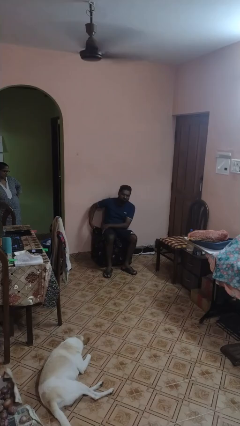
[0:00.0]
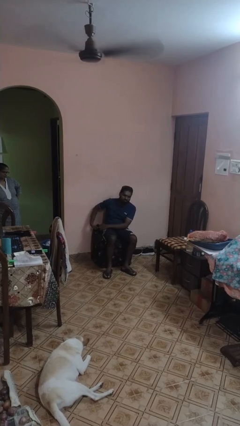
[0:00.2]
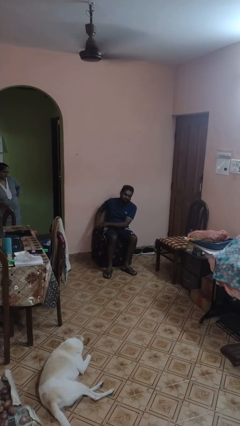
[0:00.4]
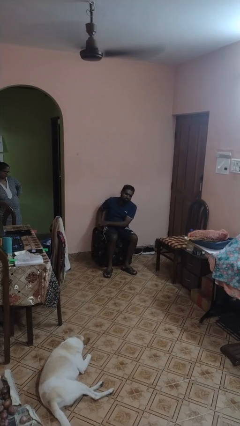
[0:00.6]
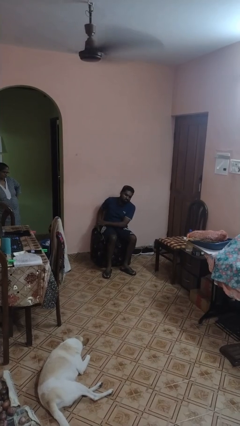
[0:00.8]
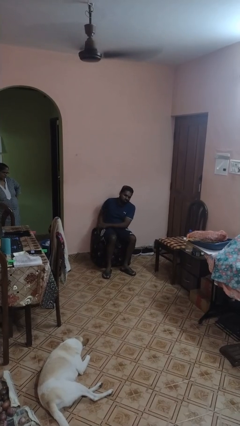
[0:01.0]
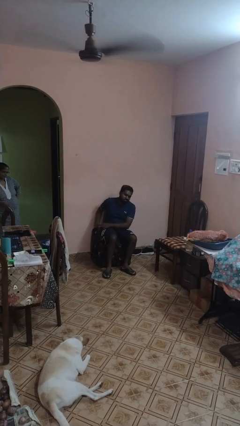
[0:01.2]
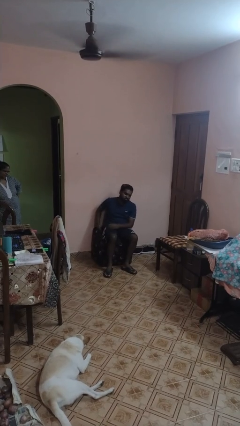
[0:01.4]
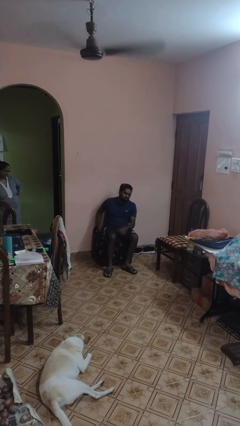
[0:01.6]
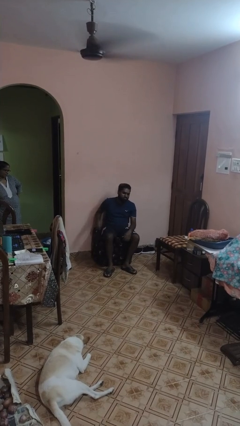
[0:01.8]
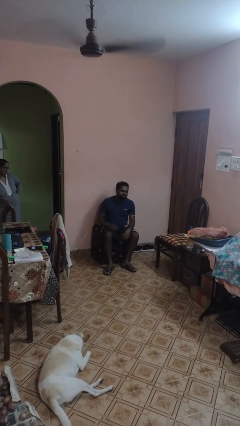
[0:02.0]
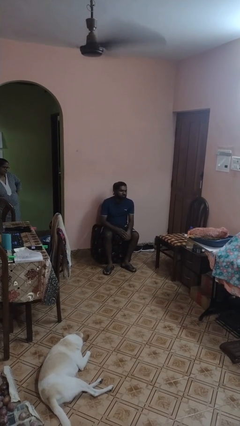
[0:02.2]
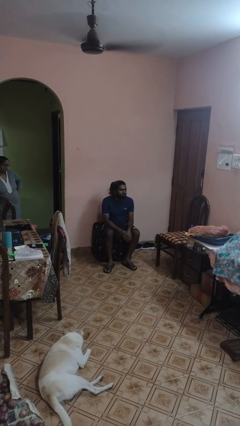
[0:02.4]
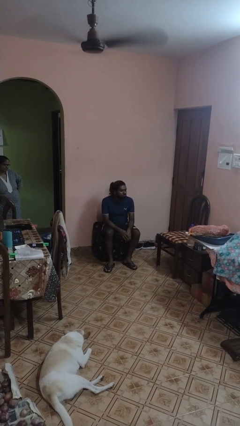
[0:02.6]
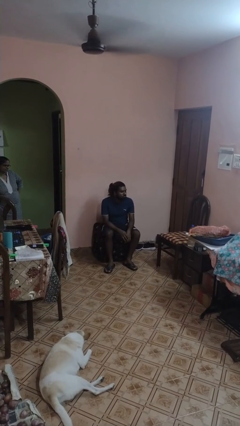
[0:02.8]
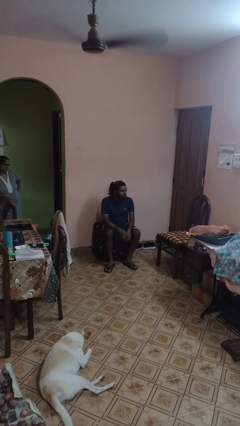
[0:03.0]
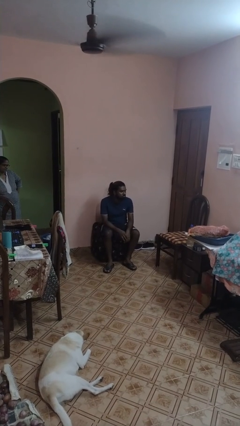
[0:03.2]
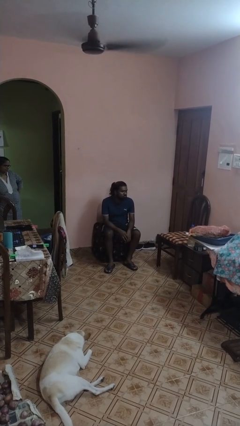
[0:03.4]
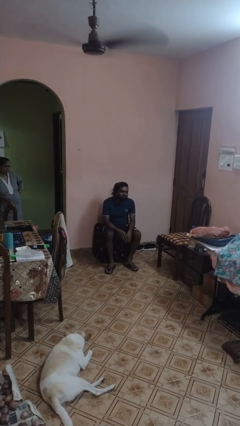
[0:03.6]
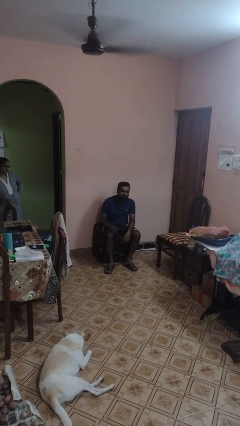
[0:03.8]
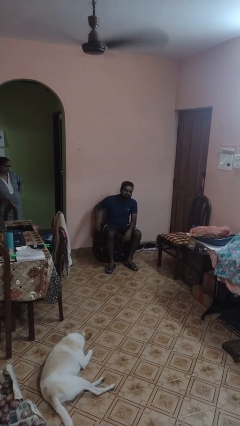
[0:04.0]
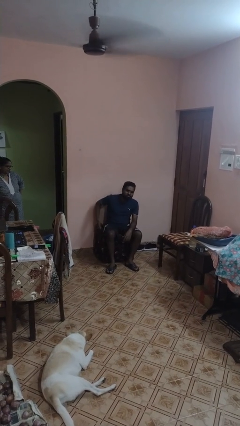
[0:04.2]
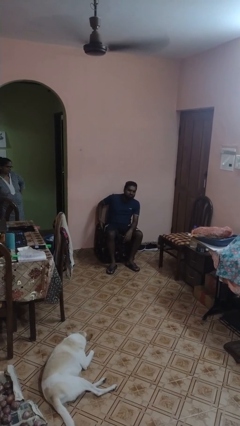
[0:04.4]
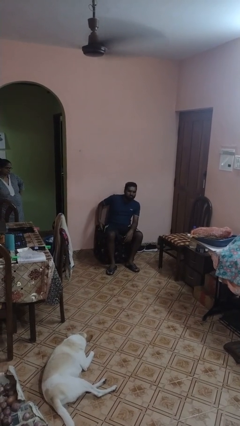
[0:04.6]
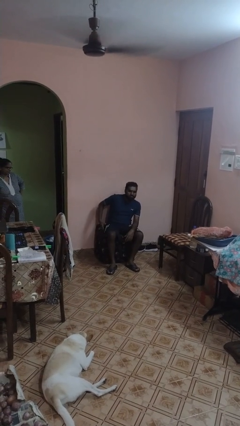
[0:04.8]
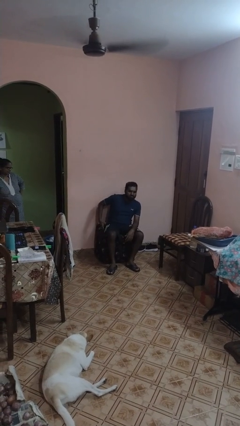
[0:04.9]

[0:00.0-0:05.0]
person puts phone into pocket

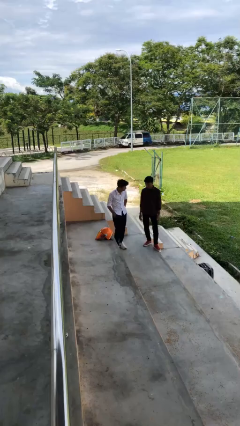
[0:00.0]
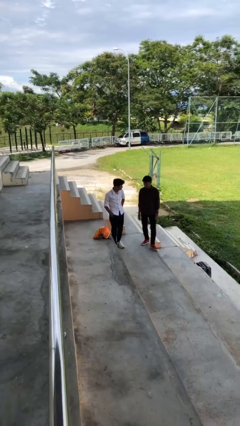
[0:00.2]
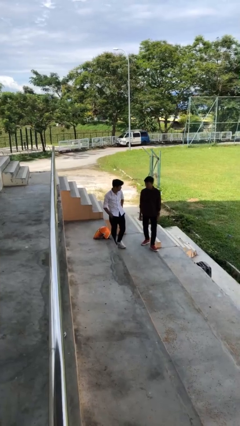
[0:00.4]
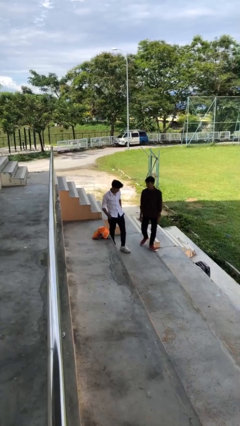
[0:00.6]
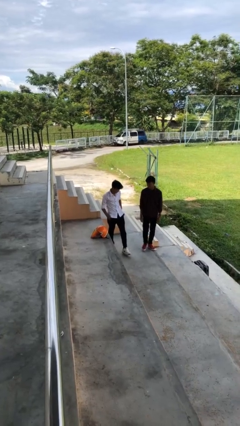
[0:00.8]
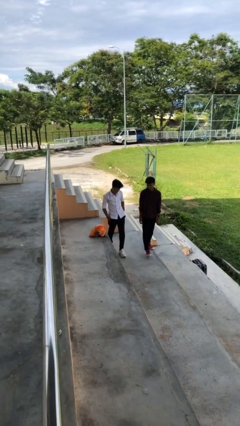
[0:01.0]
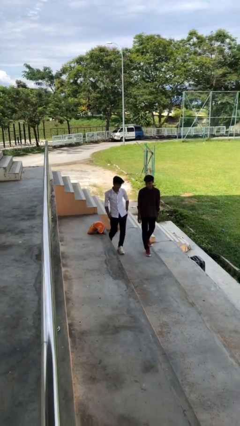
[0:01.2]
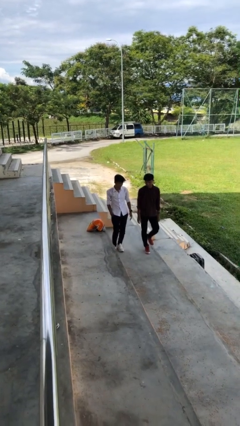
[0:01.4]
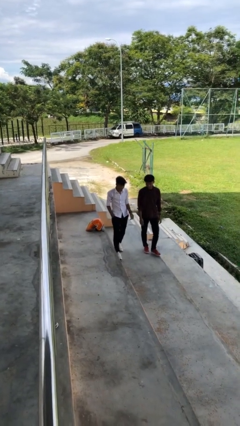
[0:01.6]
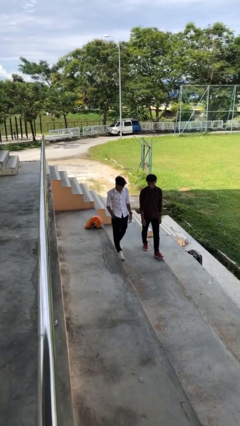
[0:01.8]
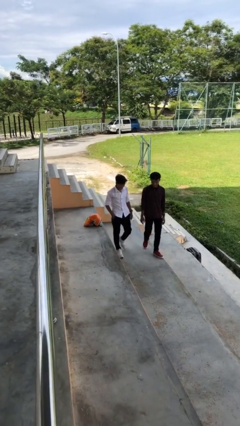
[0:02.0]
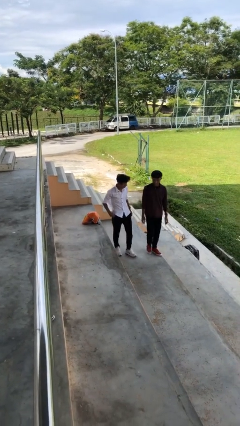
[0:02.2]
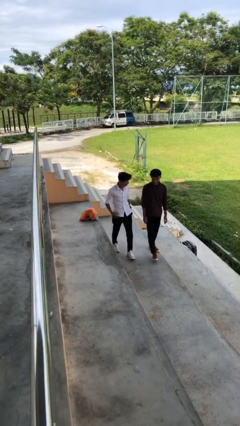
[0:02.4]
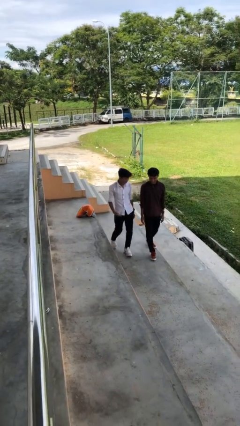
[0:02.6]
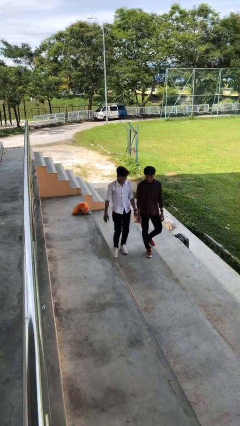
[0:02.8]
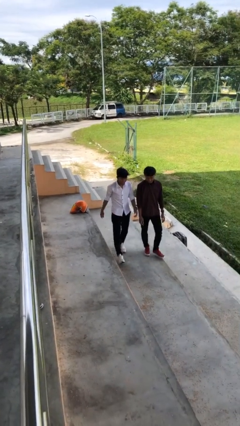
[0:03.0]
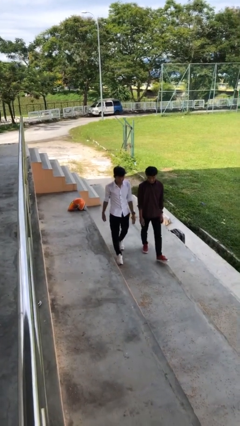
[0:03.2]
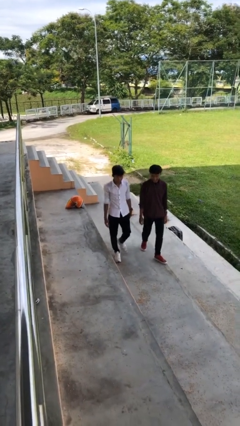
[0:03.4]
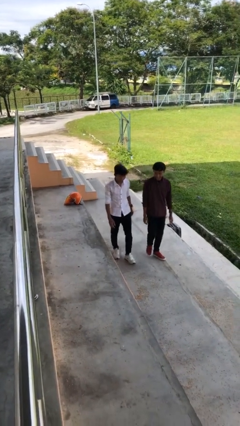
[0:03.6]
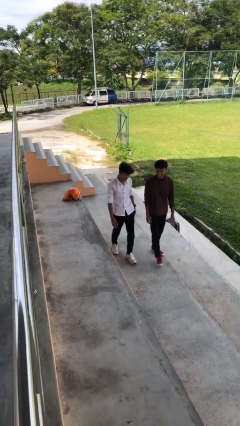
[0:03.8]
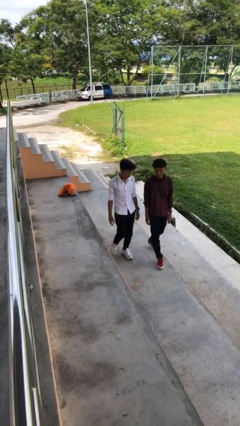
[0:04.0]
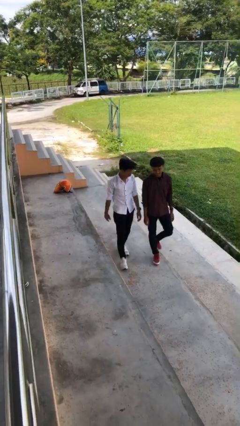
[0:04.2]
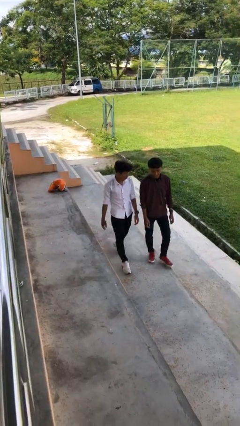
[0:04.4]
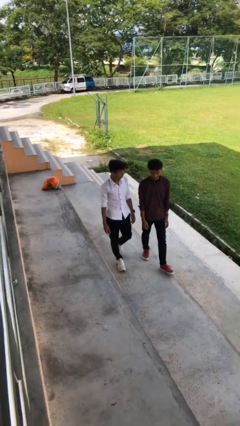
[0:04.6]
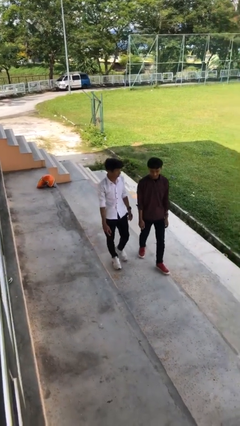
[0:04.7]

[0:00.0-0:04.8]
person talks to person

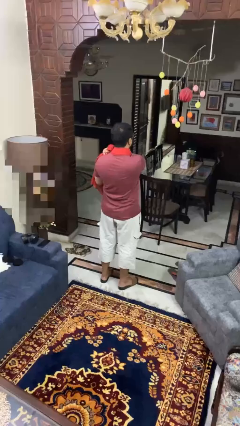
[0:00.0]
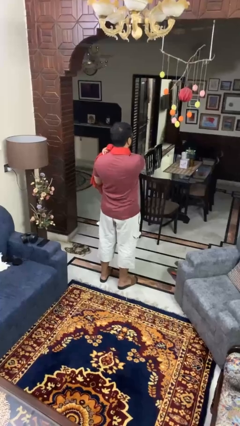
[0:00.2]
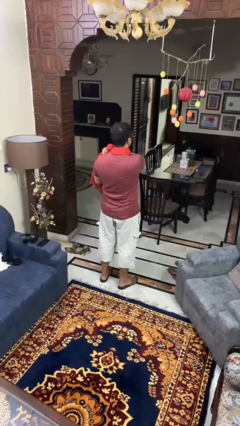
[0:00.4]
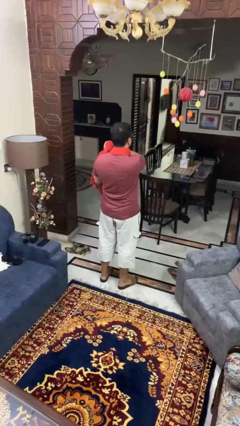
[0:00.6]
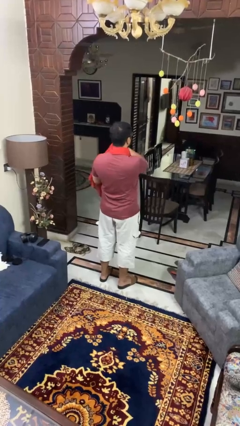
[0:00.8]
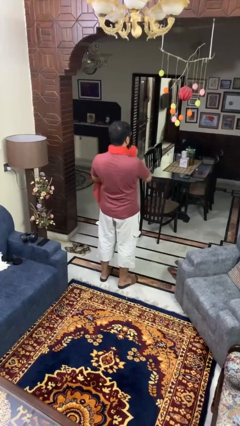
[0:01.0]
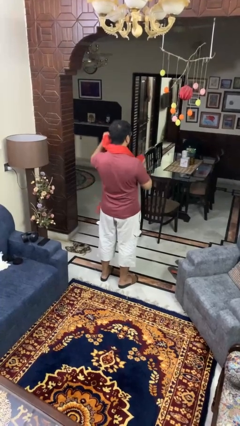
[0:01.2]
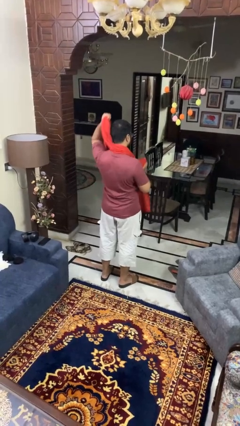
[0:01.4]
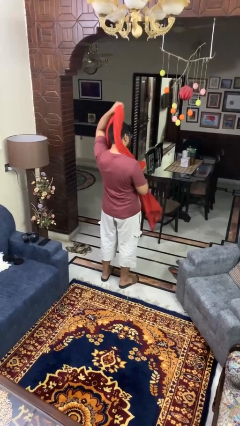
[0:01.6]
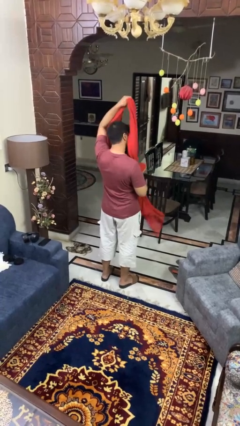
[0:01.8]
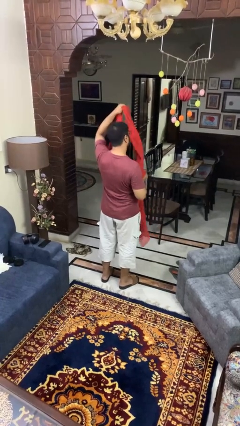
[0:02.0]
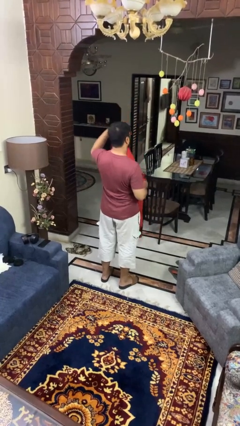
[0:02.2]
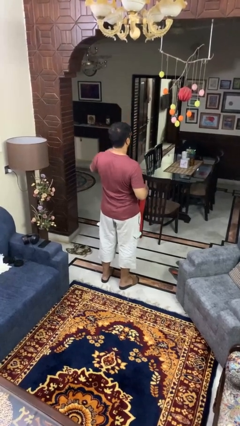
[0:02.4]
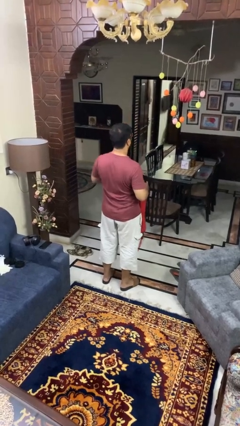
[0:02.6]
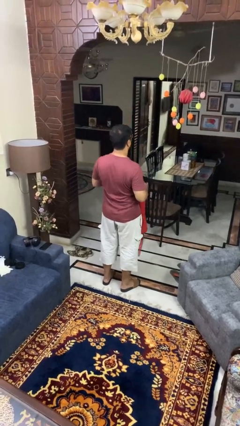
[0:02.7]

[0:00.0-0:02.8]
person takes off scarf

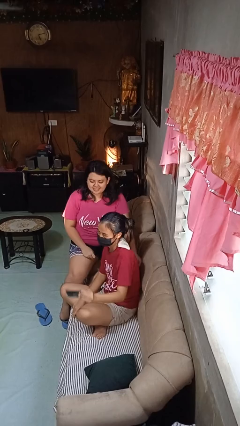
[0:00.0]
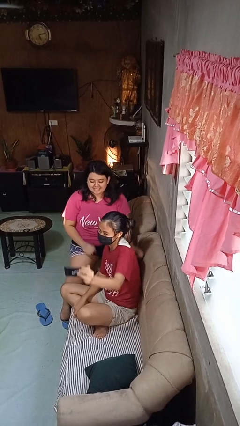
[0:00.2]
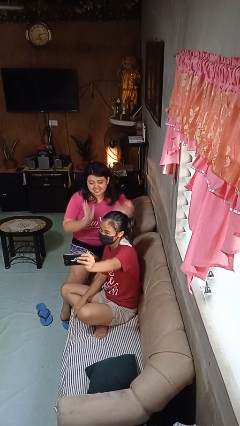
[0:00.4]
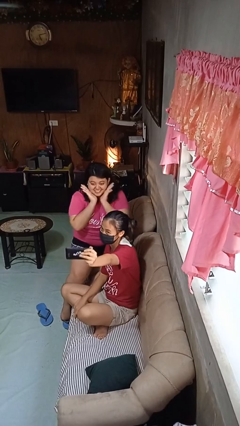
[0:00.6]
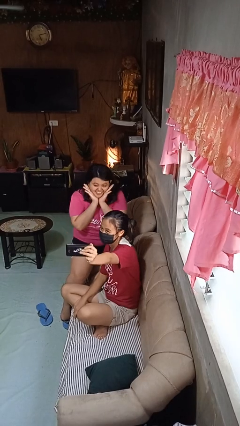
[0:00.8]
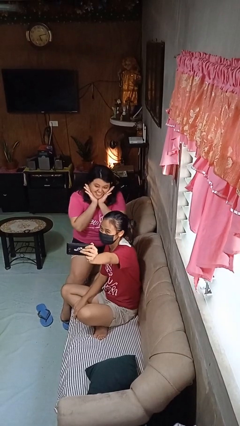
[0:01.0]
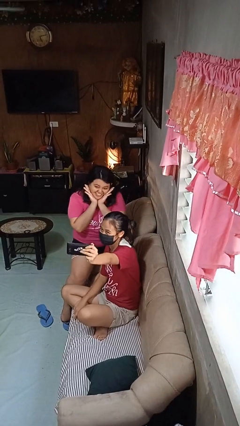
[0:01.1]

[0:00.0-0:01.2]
person takes selfie with person

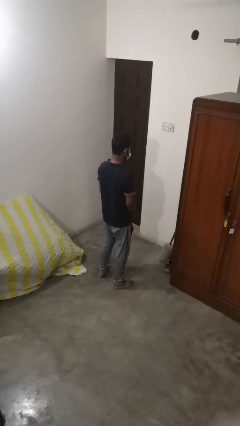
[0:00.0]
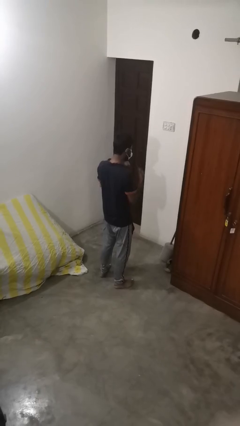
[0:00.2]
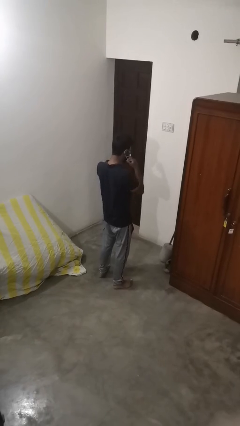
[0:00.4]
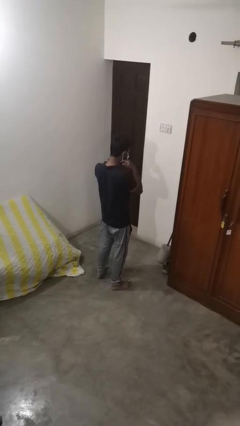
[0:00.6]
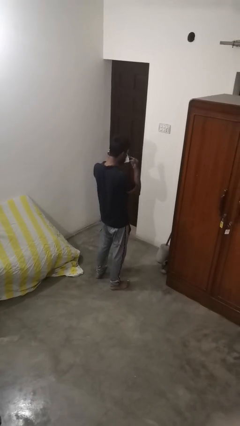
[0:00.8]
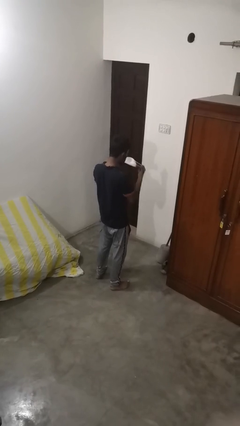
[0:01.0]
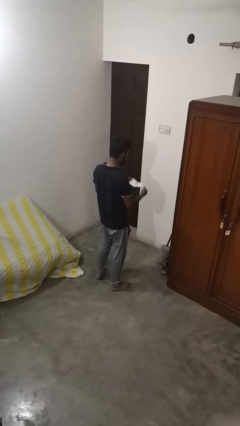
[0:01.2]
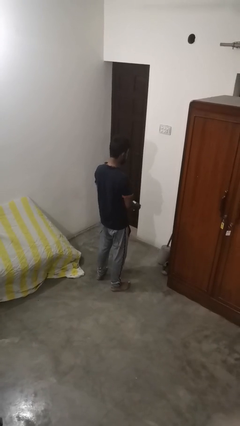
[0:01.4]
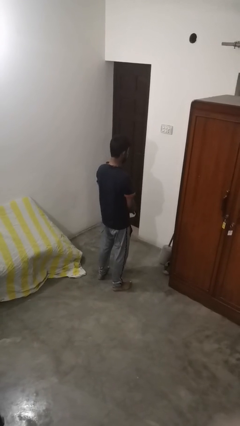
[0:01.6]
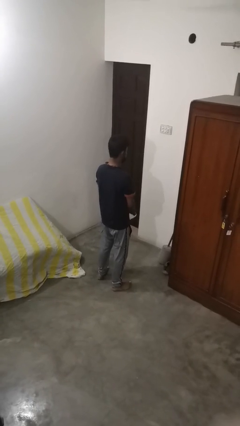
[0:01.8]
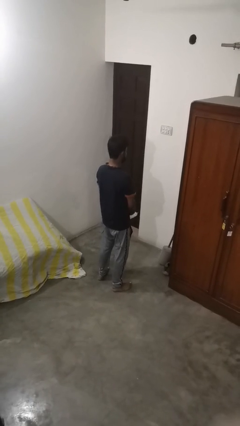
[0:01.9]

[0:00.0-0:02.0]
person takes off facemask

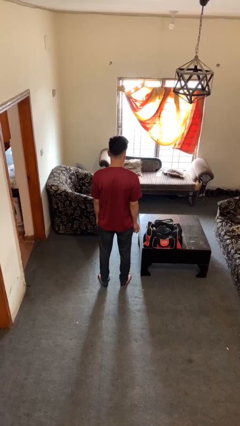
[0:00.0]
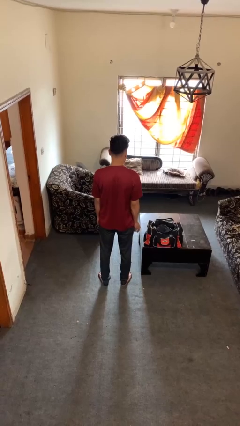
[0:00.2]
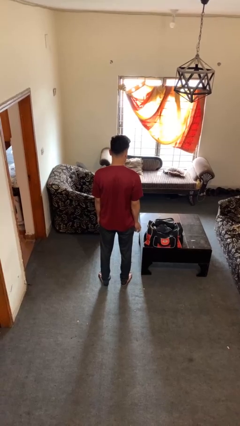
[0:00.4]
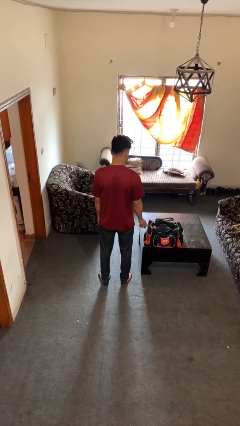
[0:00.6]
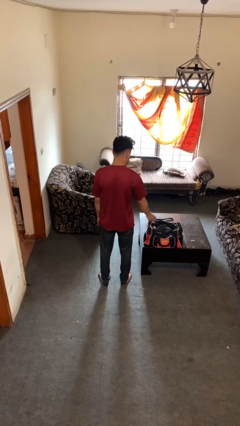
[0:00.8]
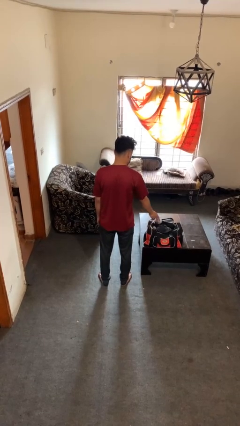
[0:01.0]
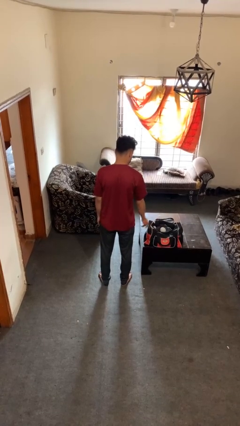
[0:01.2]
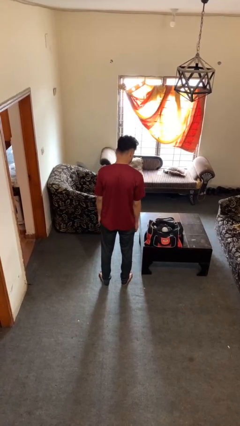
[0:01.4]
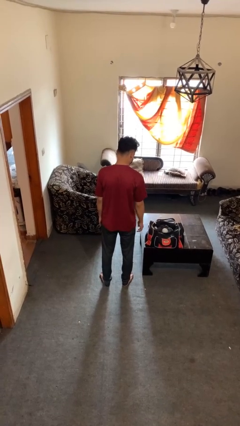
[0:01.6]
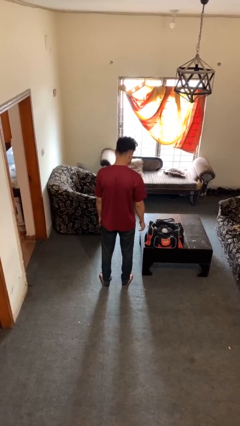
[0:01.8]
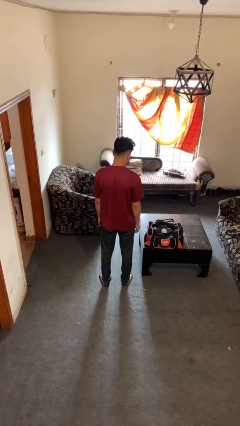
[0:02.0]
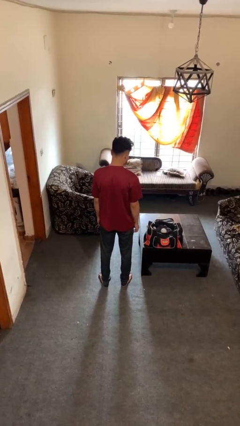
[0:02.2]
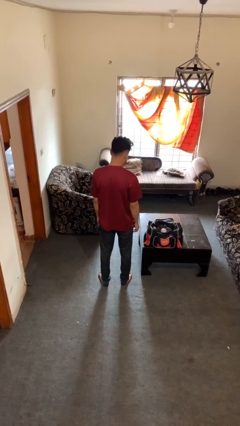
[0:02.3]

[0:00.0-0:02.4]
person puts object into bag
